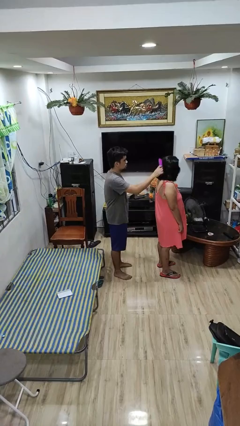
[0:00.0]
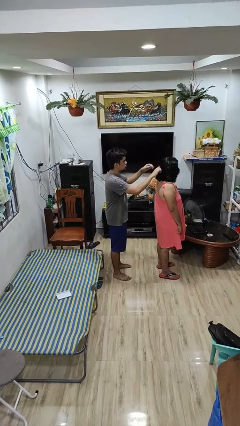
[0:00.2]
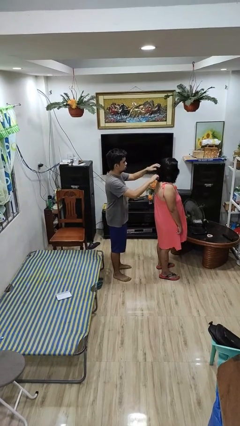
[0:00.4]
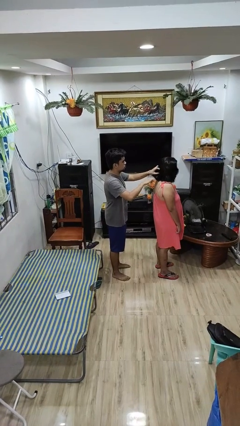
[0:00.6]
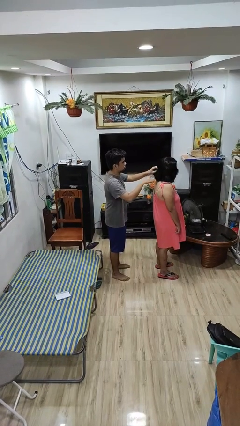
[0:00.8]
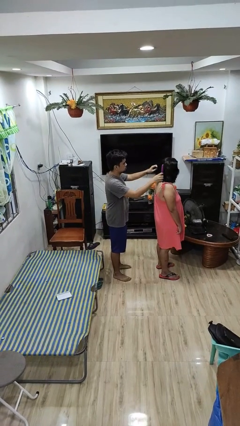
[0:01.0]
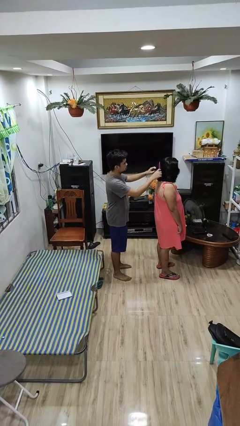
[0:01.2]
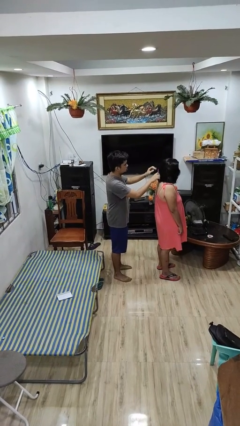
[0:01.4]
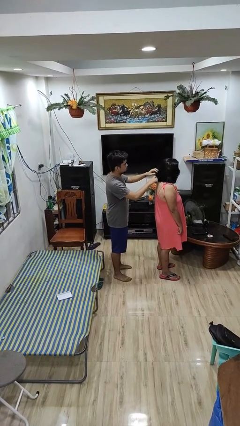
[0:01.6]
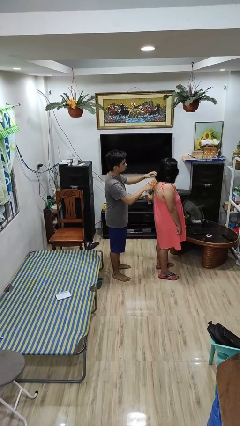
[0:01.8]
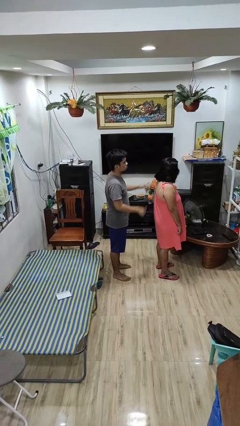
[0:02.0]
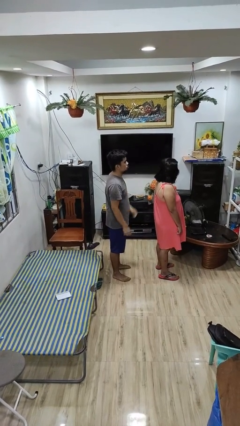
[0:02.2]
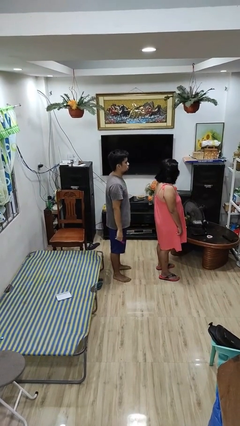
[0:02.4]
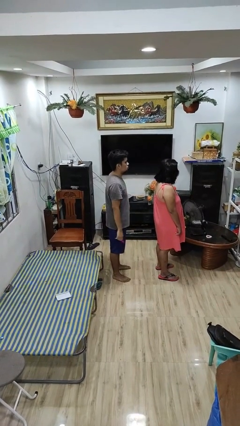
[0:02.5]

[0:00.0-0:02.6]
person brushes hair of person

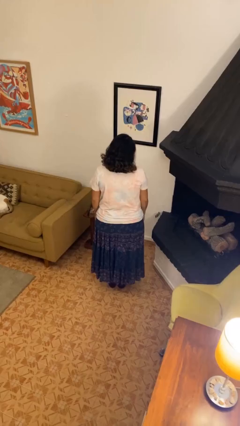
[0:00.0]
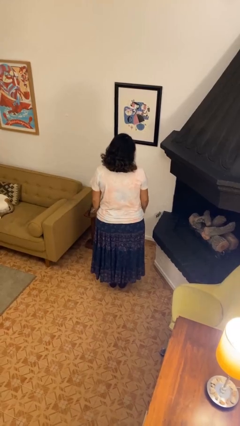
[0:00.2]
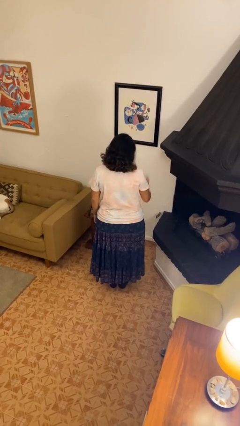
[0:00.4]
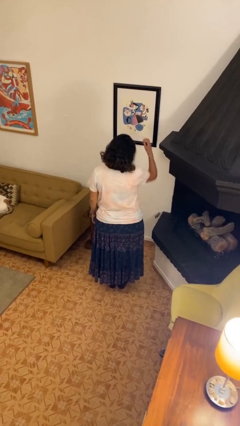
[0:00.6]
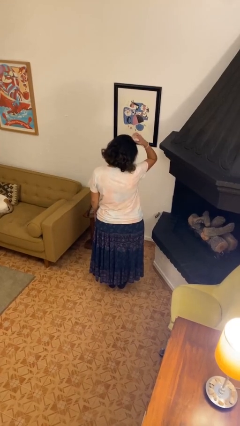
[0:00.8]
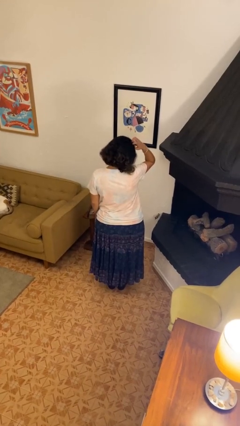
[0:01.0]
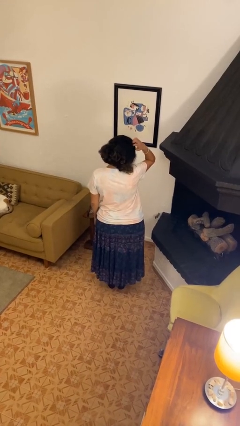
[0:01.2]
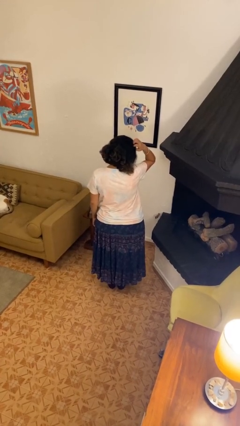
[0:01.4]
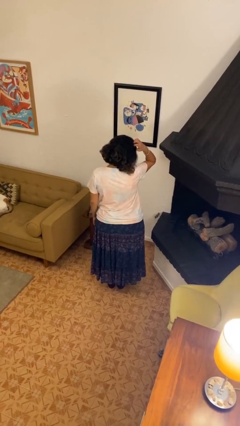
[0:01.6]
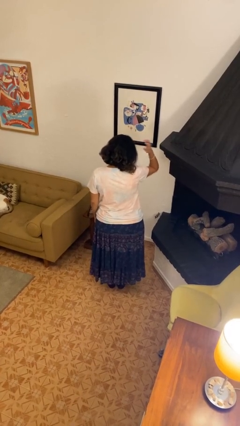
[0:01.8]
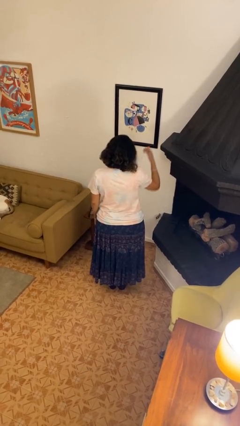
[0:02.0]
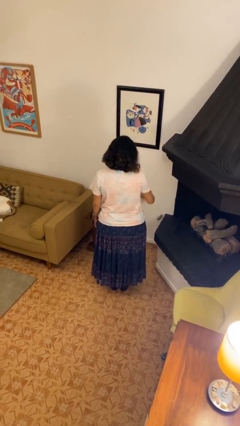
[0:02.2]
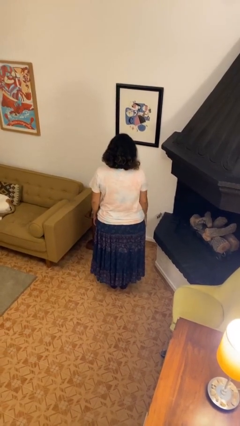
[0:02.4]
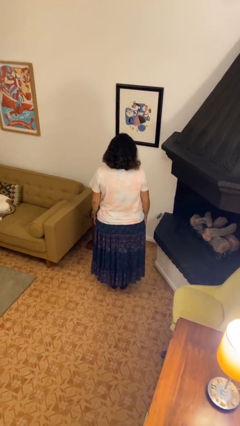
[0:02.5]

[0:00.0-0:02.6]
person scratches face

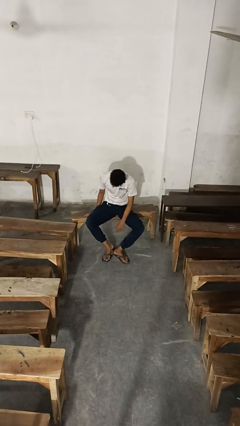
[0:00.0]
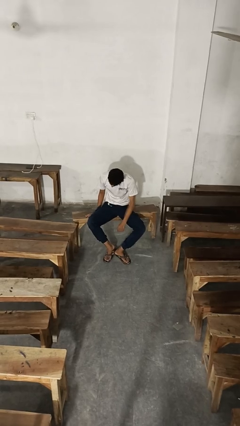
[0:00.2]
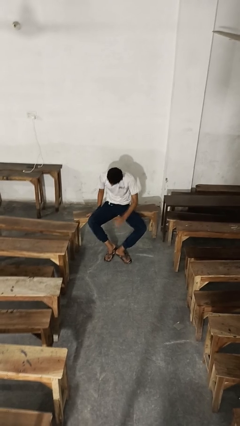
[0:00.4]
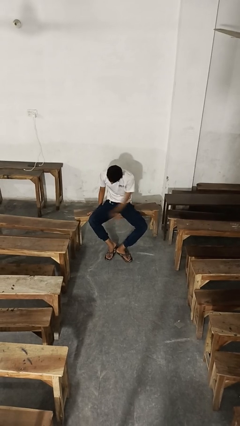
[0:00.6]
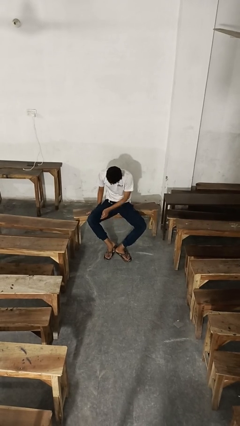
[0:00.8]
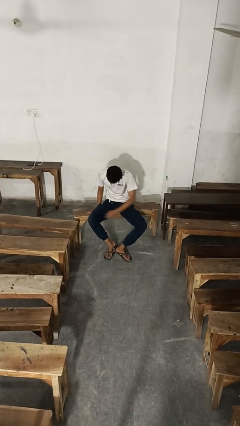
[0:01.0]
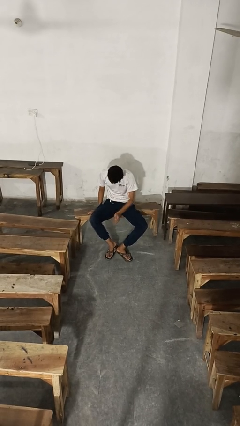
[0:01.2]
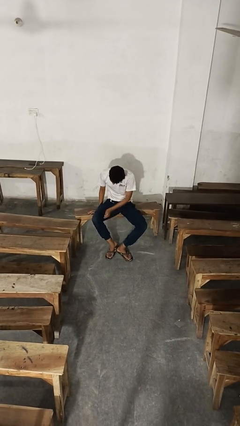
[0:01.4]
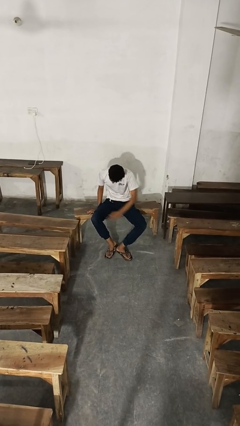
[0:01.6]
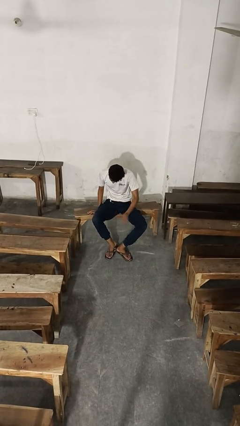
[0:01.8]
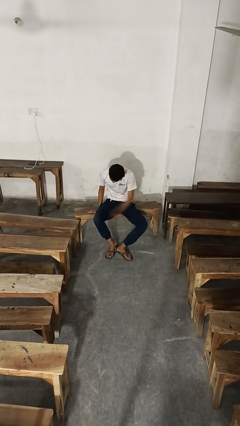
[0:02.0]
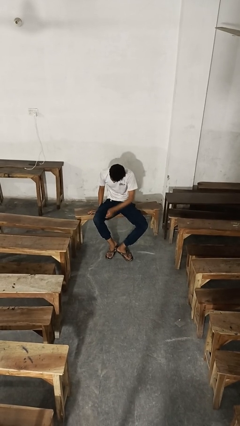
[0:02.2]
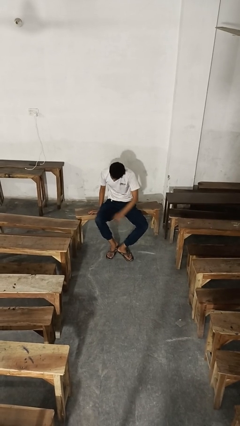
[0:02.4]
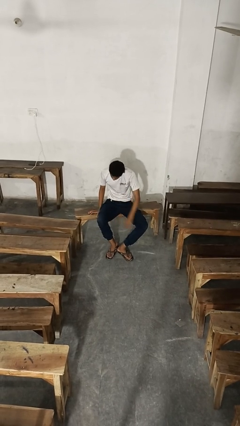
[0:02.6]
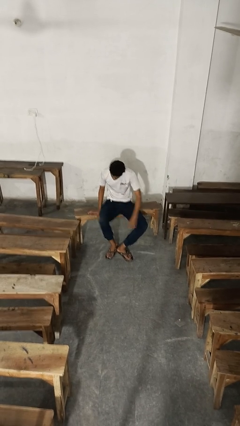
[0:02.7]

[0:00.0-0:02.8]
person slaps hands on thighs

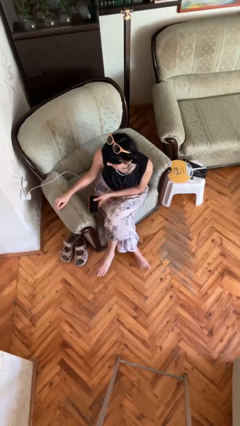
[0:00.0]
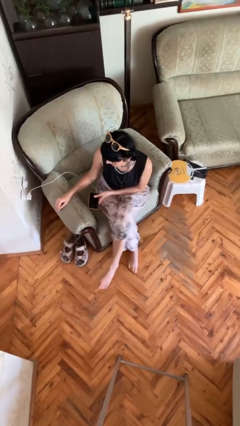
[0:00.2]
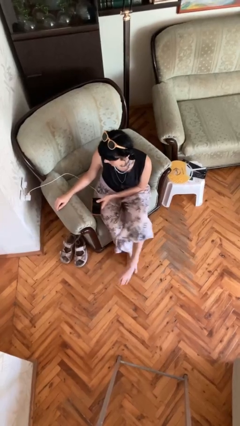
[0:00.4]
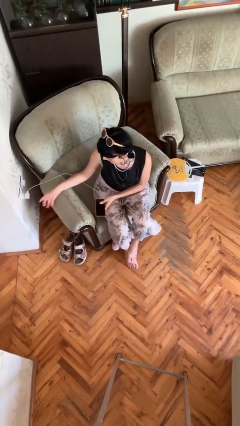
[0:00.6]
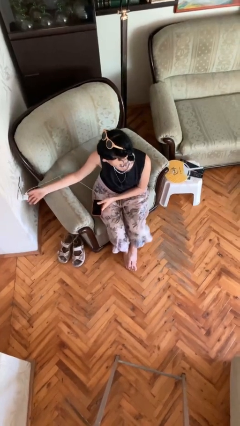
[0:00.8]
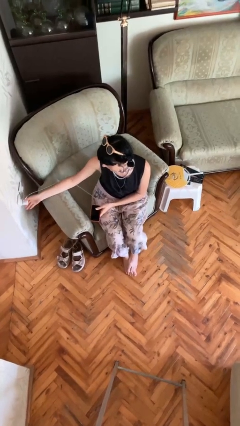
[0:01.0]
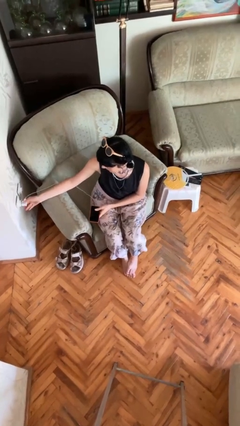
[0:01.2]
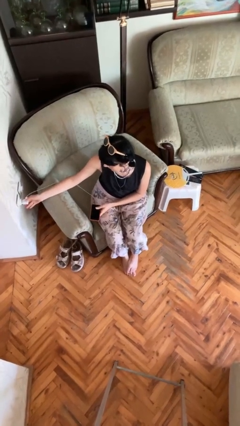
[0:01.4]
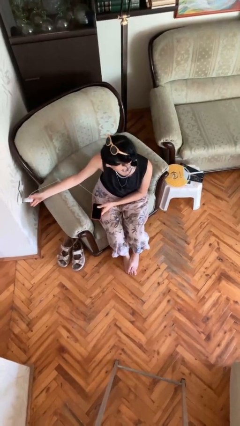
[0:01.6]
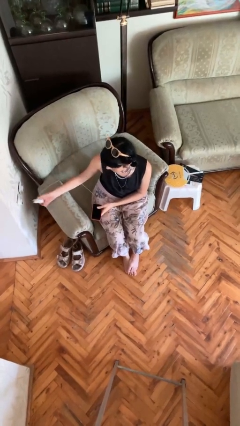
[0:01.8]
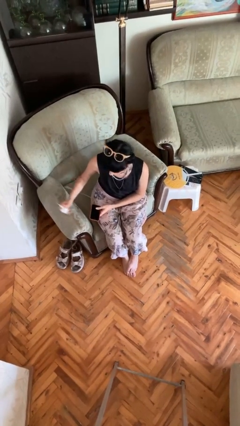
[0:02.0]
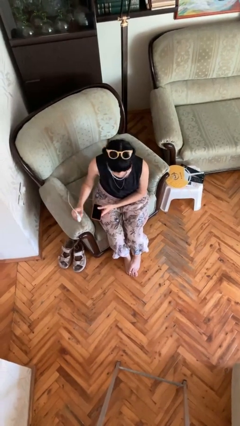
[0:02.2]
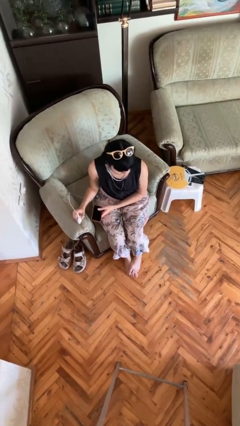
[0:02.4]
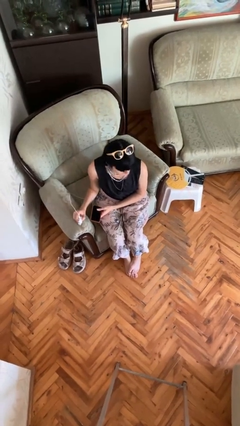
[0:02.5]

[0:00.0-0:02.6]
person unplugs from electrical socket

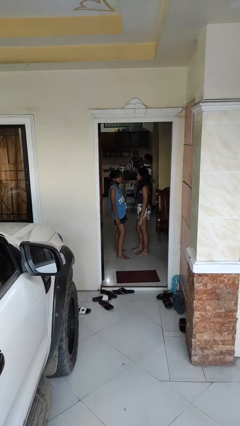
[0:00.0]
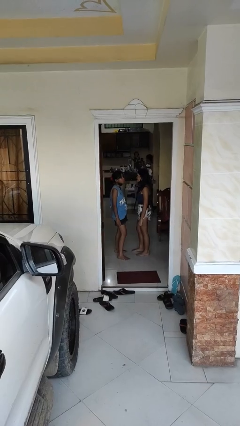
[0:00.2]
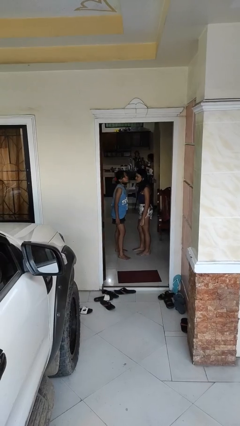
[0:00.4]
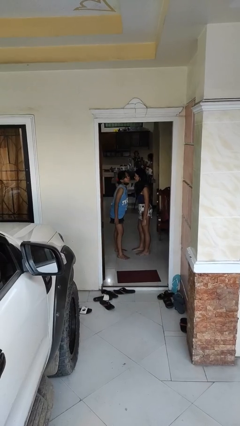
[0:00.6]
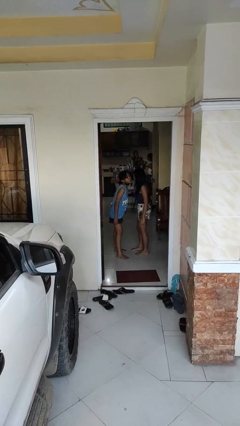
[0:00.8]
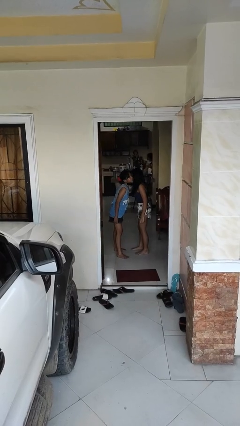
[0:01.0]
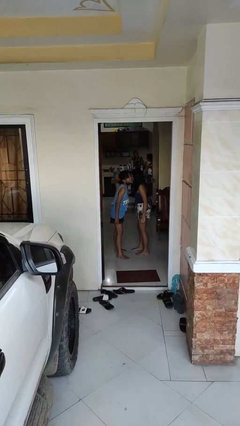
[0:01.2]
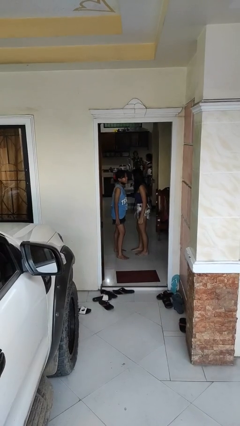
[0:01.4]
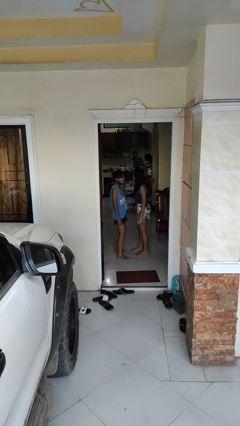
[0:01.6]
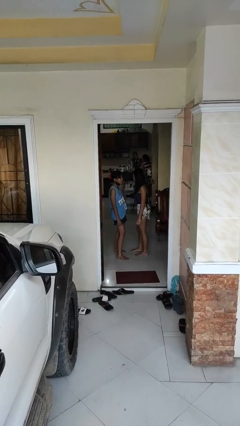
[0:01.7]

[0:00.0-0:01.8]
person kisses cheek of person

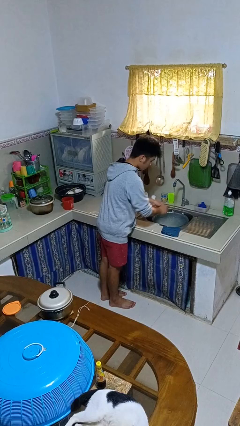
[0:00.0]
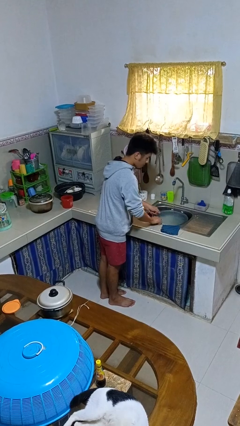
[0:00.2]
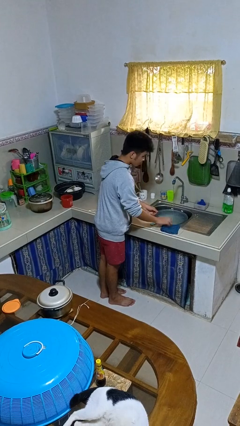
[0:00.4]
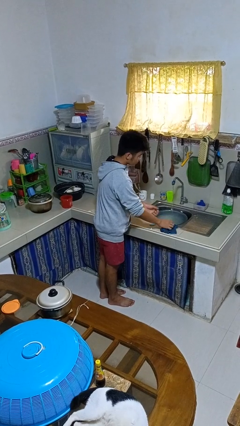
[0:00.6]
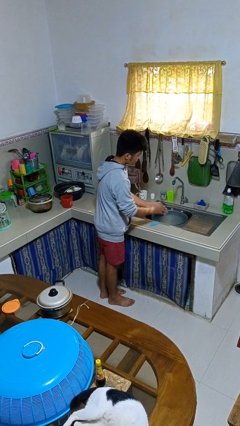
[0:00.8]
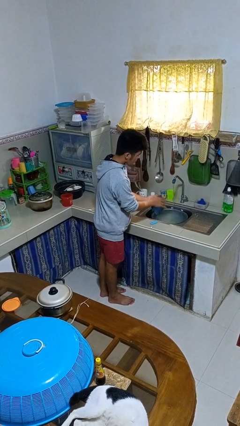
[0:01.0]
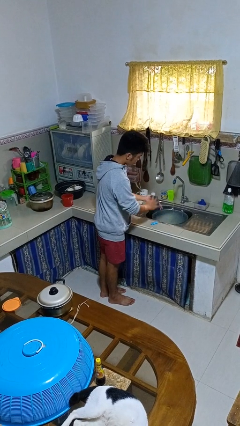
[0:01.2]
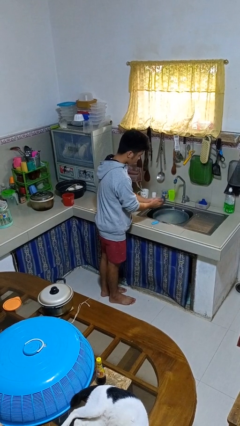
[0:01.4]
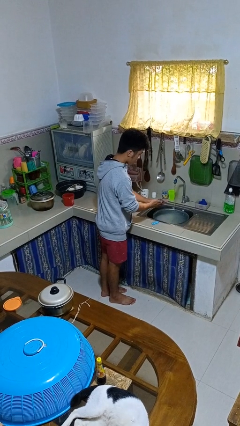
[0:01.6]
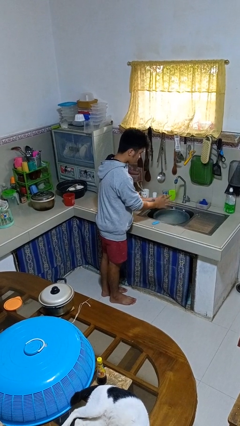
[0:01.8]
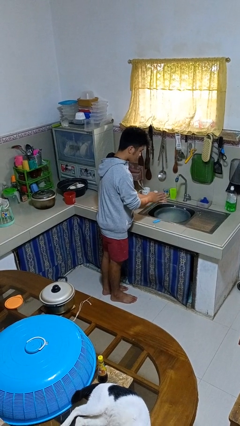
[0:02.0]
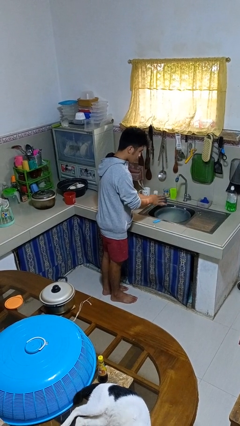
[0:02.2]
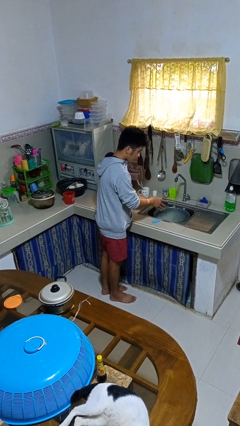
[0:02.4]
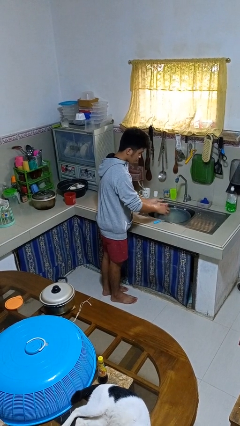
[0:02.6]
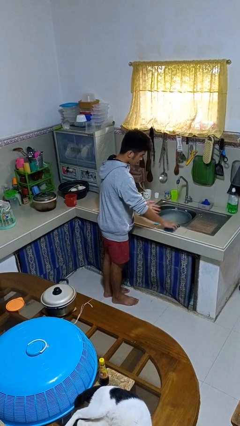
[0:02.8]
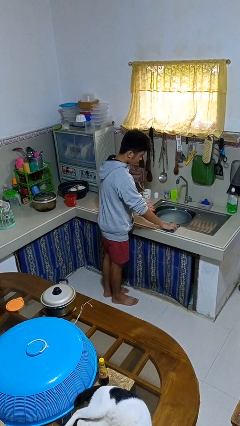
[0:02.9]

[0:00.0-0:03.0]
person dries hands with towel

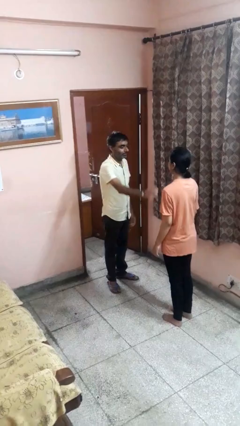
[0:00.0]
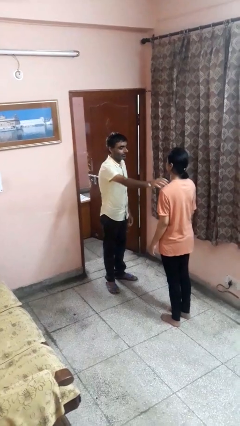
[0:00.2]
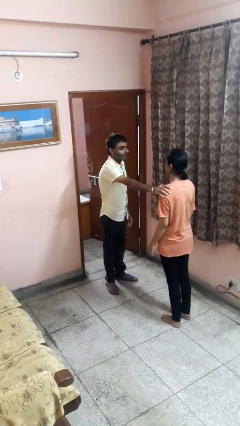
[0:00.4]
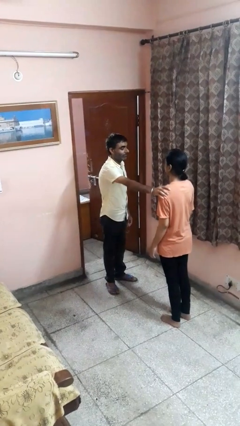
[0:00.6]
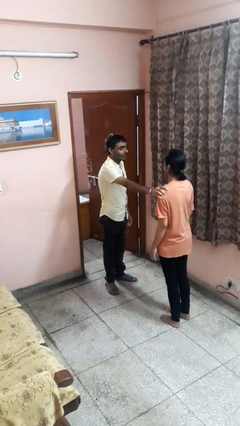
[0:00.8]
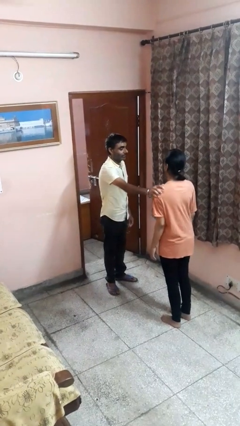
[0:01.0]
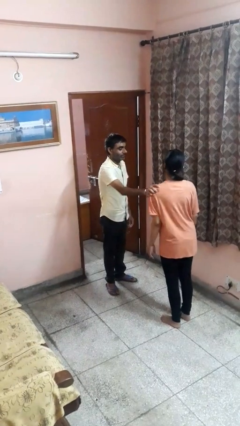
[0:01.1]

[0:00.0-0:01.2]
person grabs person by shoulder

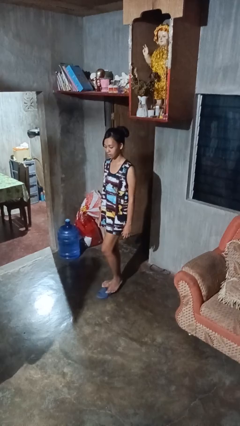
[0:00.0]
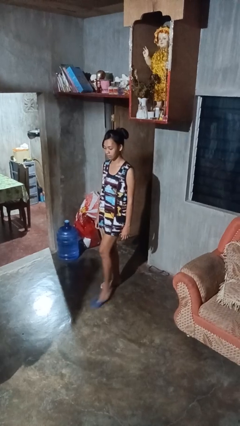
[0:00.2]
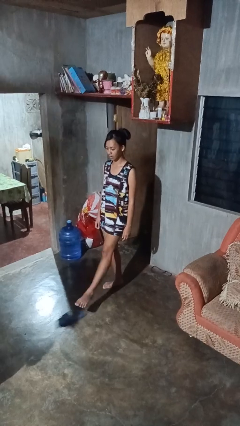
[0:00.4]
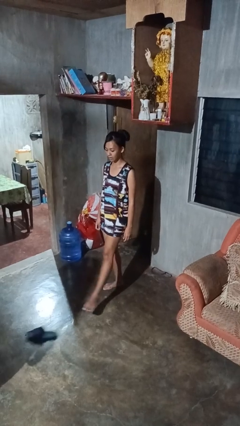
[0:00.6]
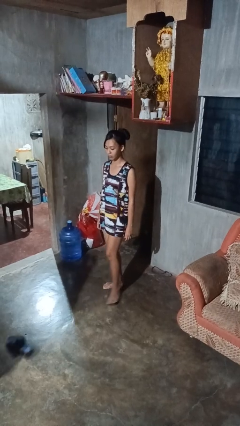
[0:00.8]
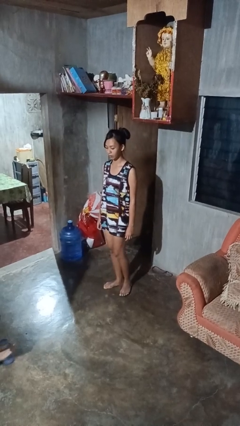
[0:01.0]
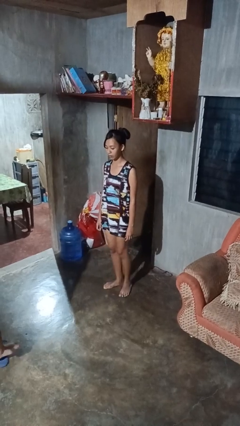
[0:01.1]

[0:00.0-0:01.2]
person kicks object to person
